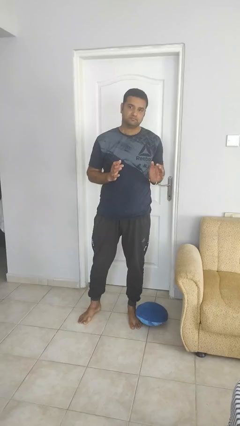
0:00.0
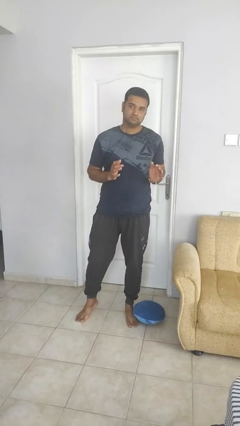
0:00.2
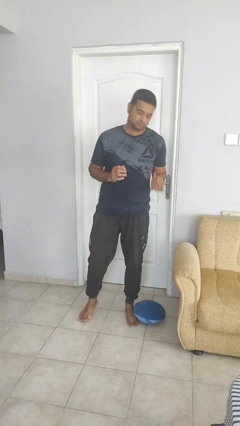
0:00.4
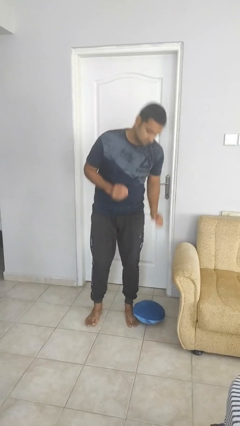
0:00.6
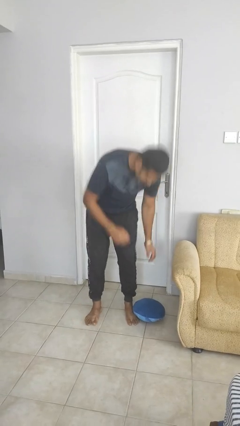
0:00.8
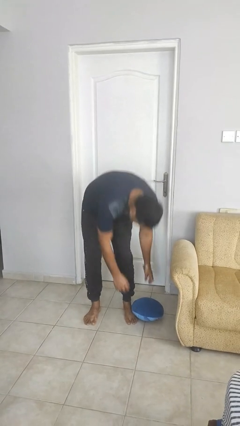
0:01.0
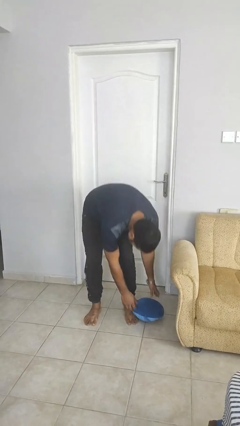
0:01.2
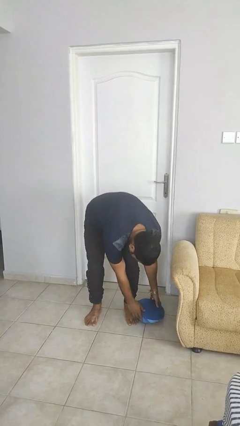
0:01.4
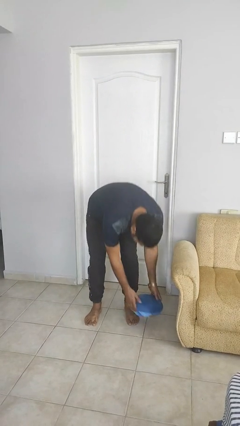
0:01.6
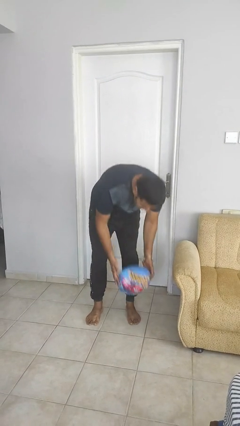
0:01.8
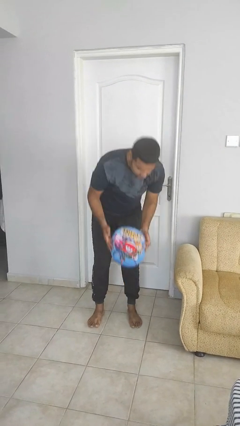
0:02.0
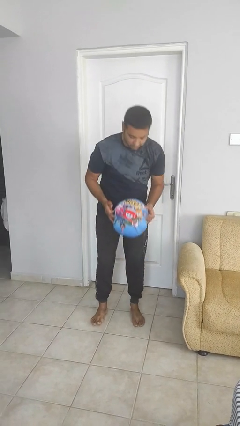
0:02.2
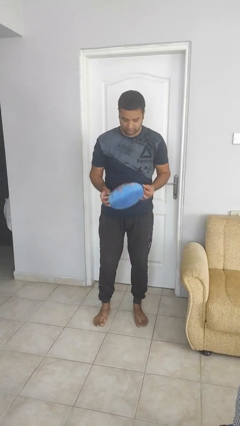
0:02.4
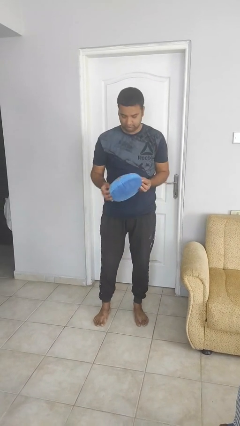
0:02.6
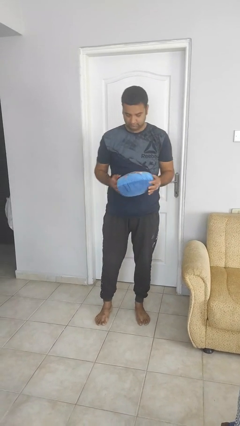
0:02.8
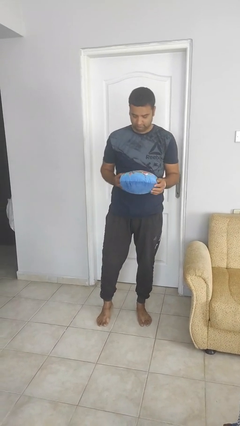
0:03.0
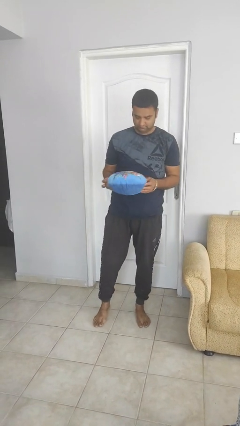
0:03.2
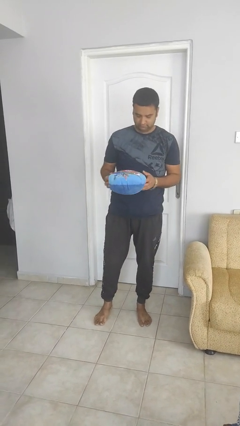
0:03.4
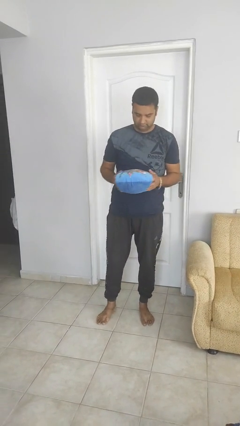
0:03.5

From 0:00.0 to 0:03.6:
person picks up object from floor

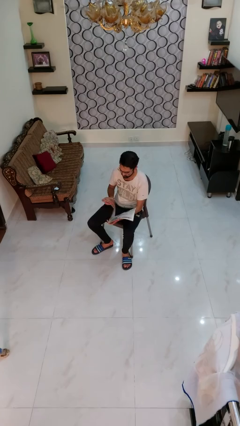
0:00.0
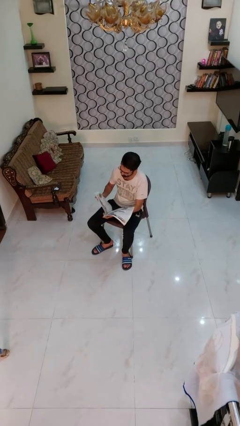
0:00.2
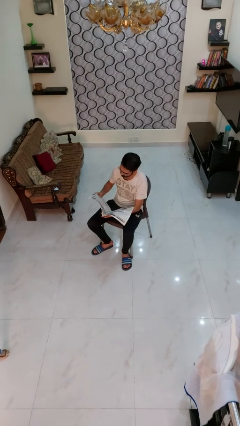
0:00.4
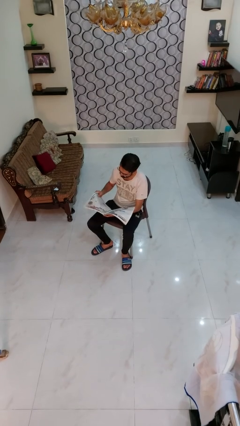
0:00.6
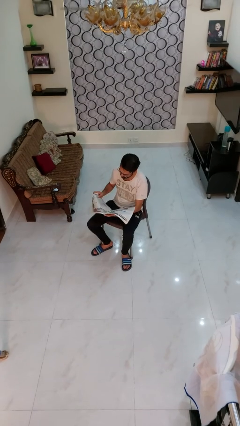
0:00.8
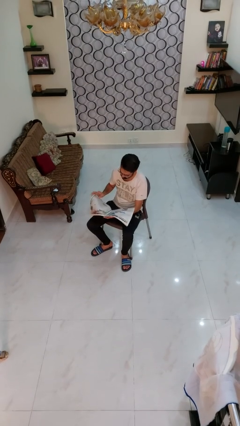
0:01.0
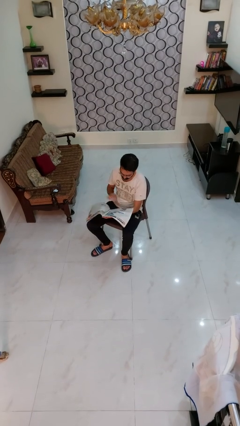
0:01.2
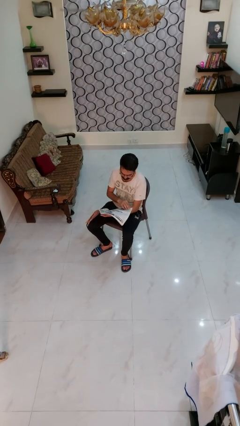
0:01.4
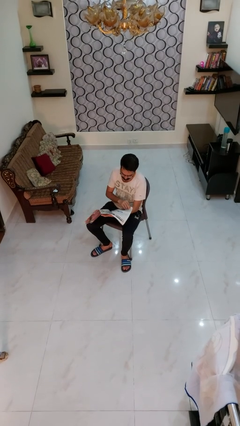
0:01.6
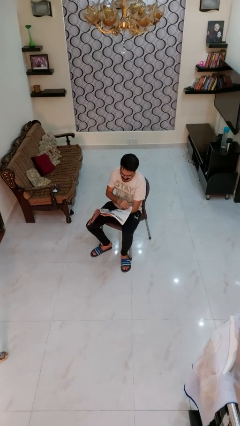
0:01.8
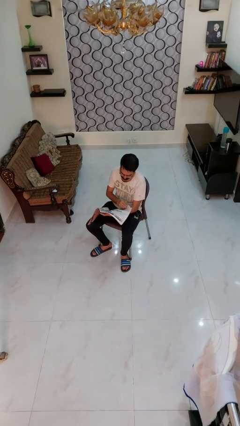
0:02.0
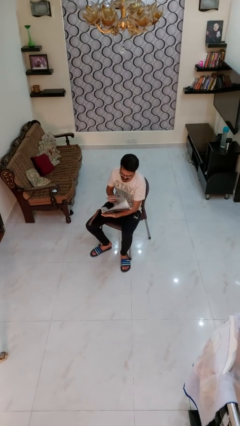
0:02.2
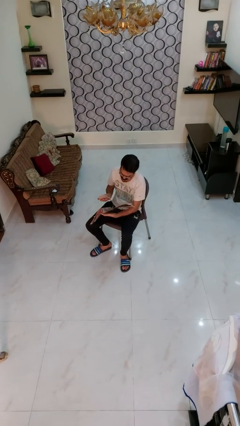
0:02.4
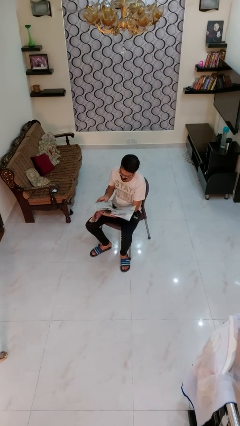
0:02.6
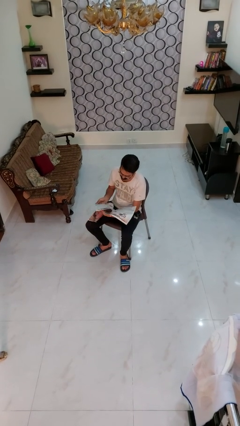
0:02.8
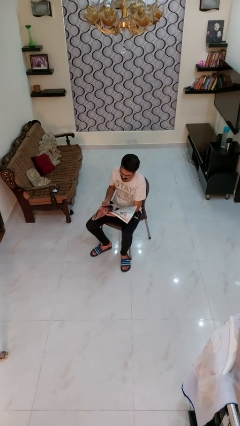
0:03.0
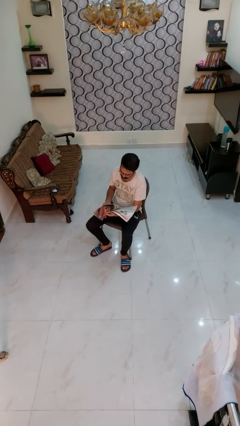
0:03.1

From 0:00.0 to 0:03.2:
person reads magazine

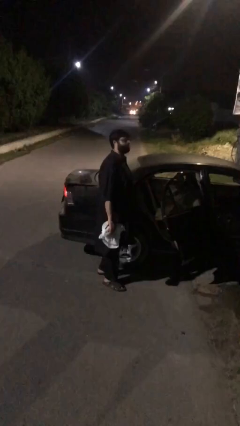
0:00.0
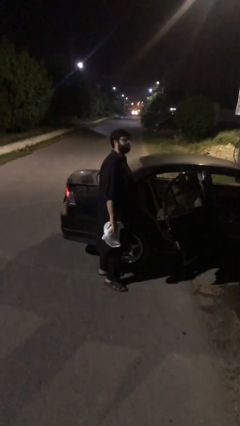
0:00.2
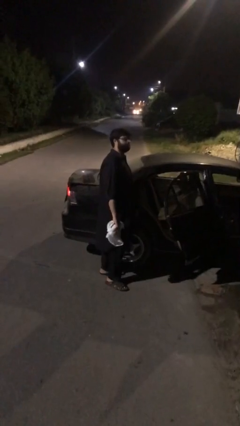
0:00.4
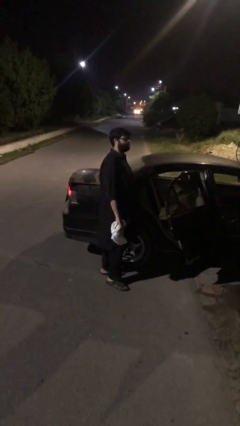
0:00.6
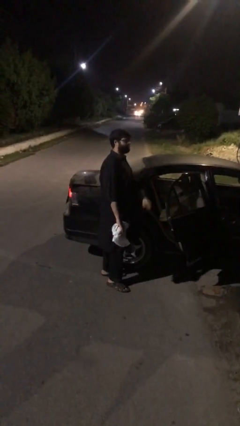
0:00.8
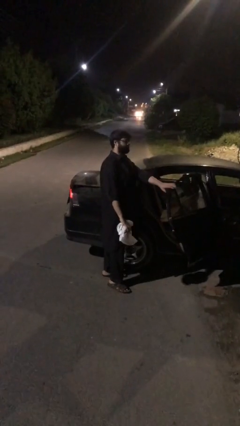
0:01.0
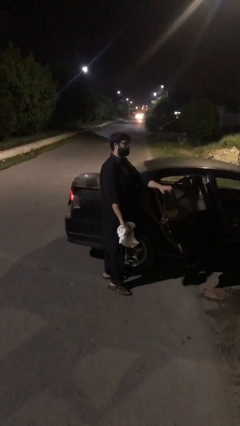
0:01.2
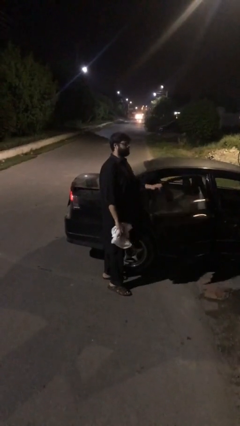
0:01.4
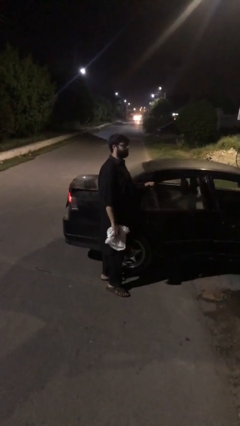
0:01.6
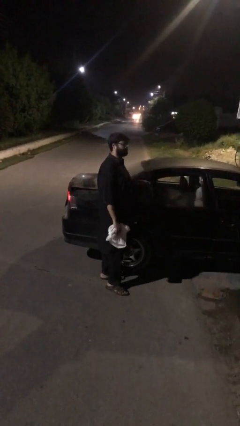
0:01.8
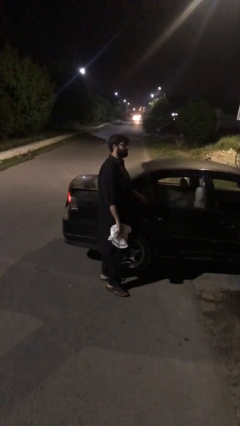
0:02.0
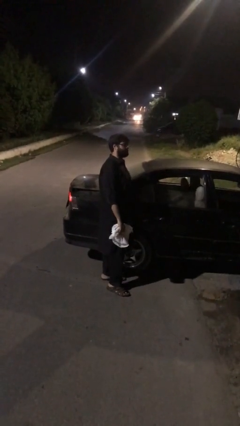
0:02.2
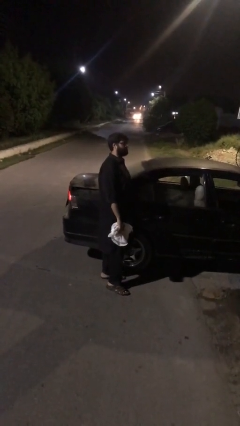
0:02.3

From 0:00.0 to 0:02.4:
person closes car door

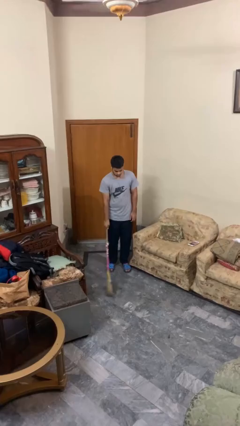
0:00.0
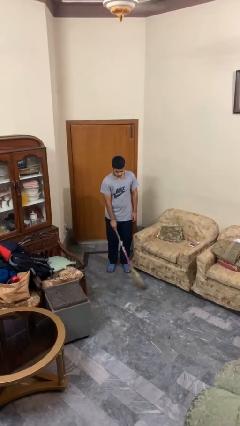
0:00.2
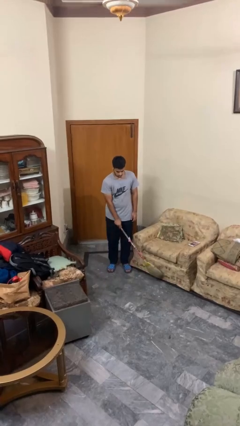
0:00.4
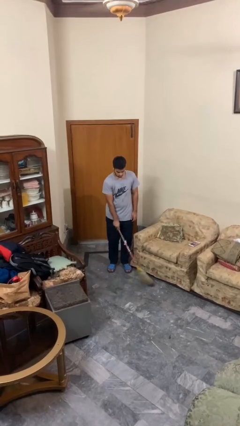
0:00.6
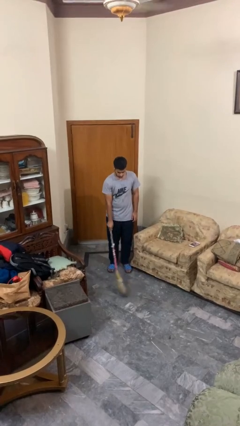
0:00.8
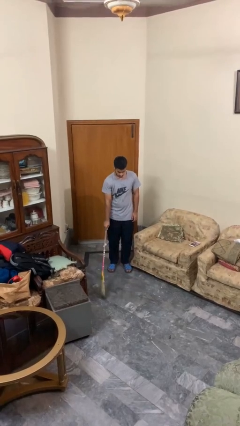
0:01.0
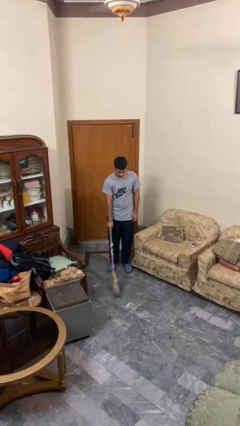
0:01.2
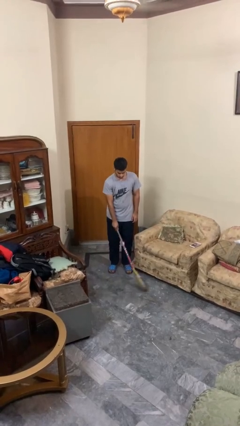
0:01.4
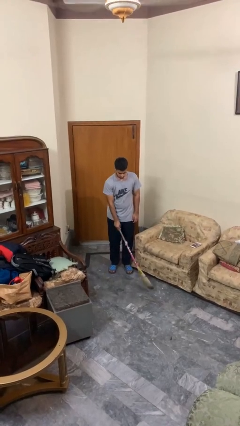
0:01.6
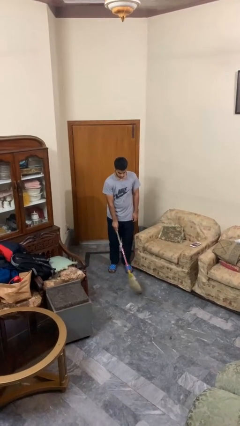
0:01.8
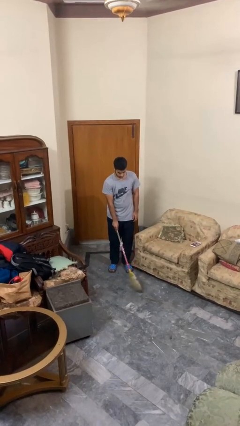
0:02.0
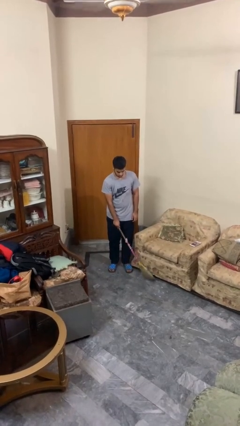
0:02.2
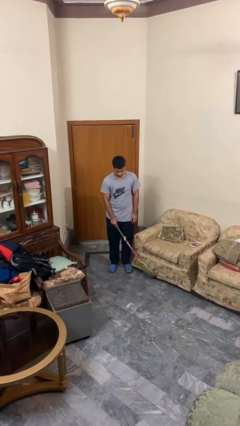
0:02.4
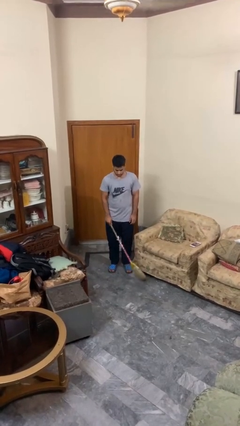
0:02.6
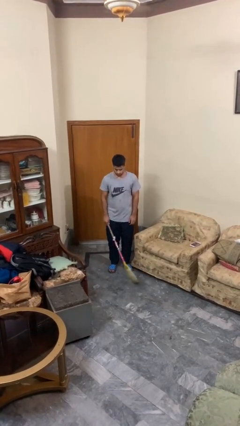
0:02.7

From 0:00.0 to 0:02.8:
person sweeps floor

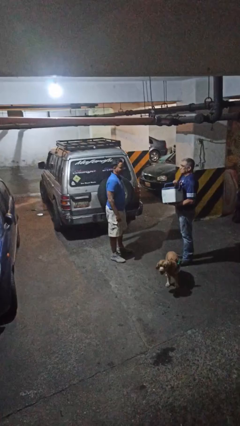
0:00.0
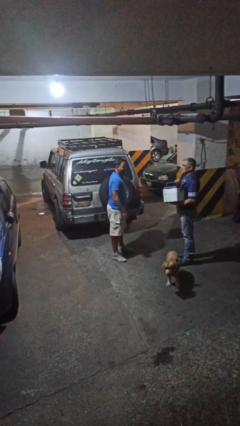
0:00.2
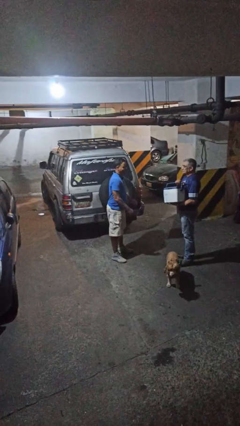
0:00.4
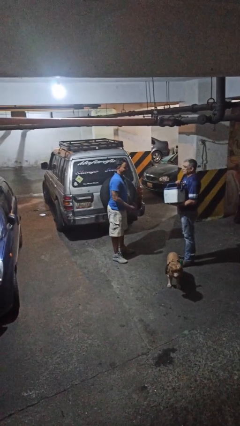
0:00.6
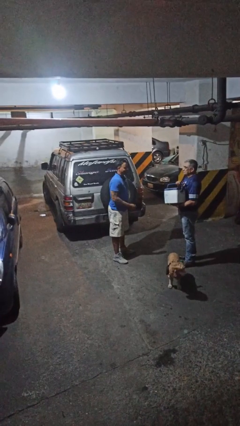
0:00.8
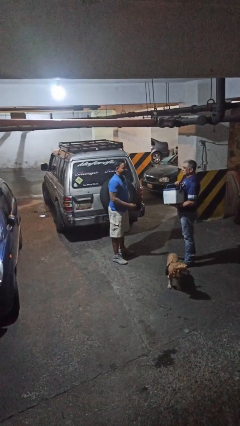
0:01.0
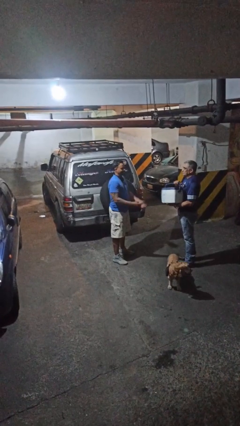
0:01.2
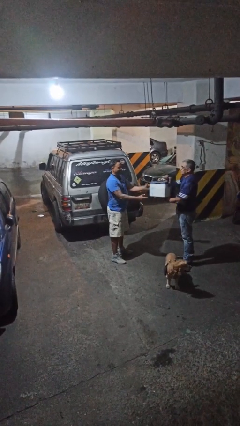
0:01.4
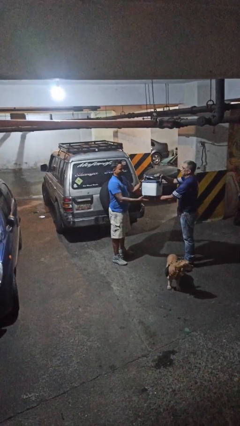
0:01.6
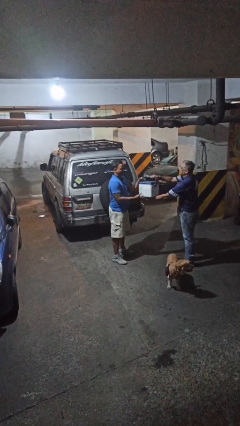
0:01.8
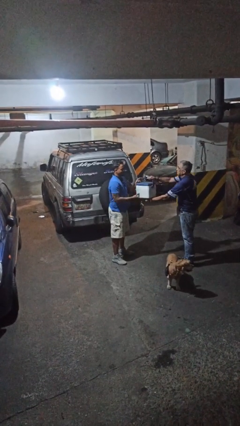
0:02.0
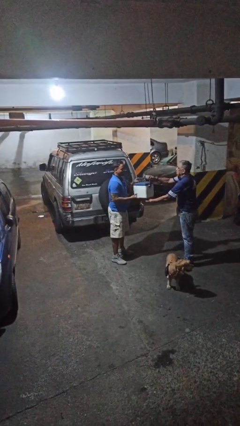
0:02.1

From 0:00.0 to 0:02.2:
person transfers object to person

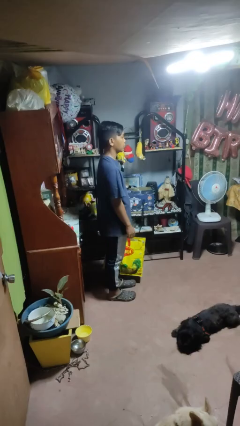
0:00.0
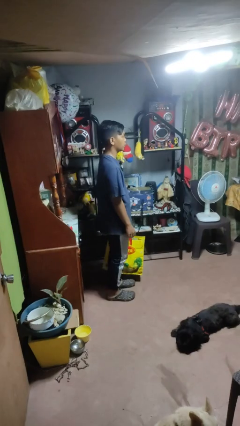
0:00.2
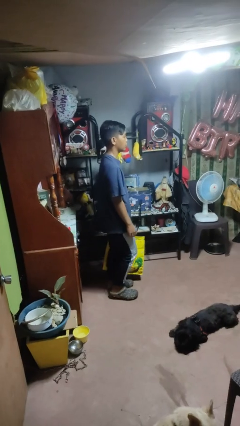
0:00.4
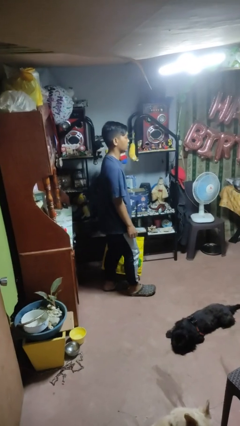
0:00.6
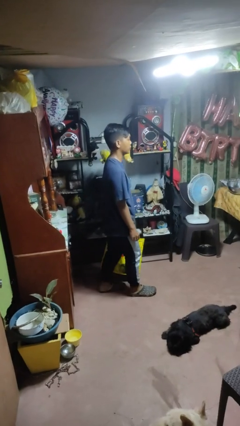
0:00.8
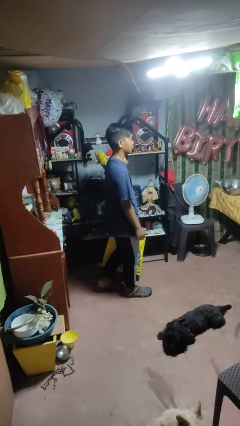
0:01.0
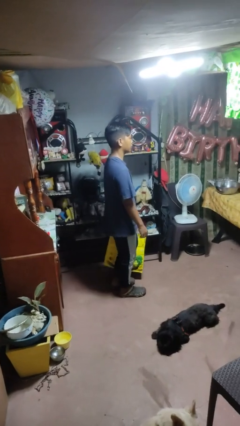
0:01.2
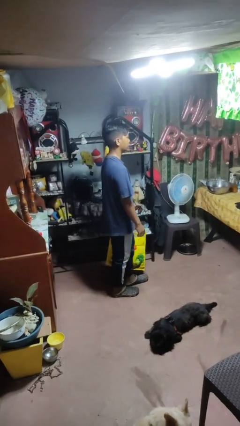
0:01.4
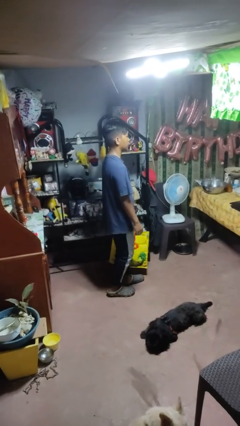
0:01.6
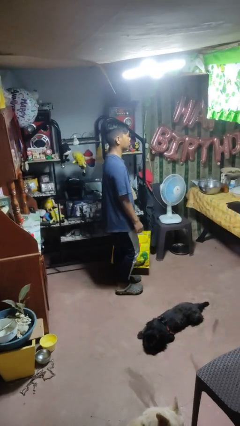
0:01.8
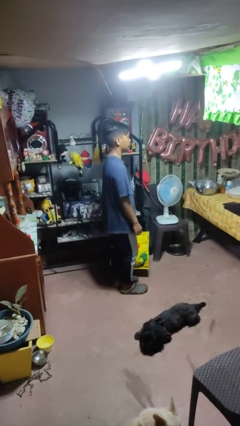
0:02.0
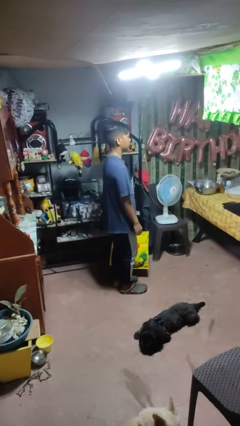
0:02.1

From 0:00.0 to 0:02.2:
person carries groceries

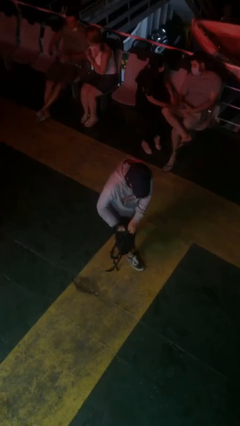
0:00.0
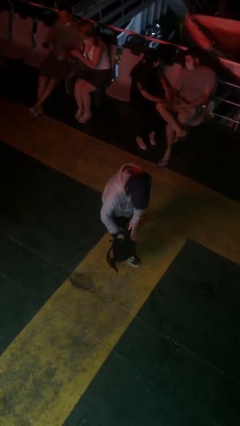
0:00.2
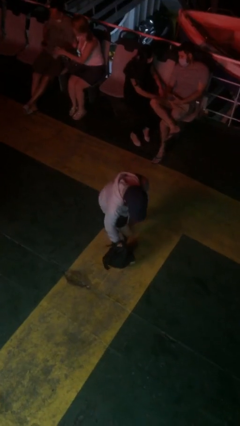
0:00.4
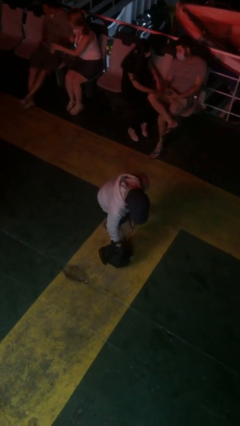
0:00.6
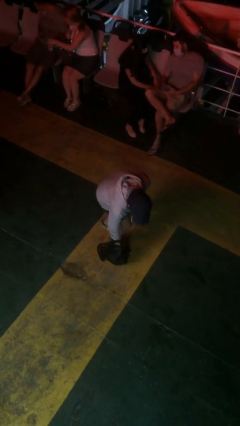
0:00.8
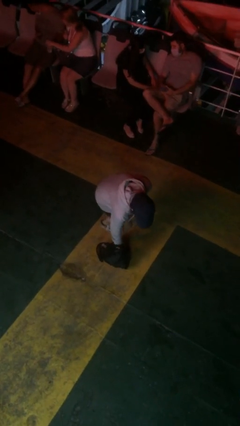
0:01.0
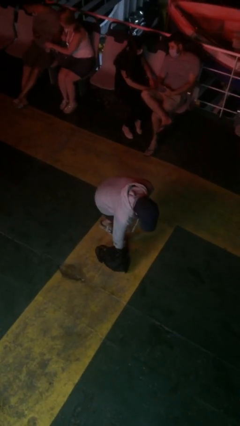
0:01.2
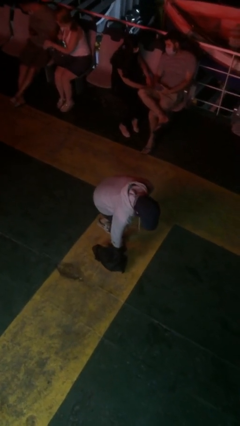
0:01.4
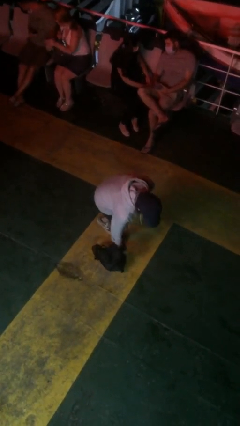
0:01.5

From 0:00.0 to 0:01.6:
person puts down object on floor
